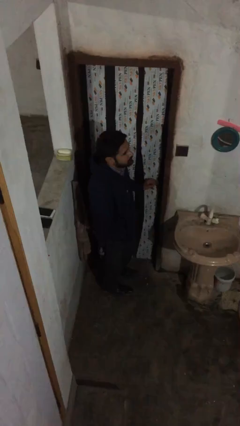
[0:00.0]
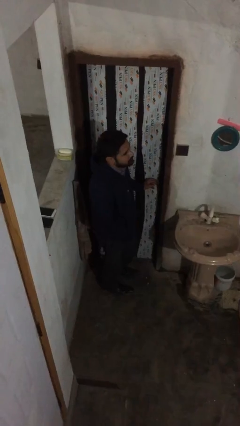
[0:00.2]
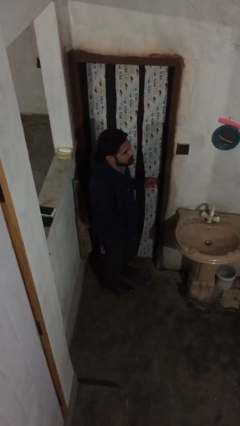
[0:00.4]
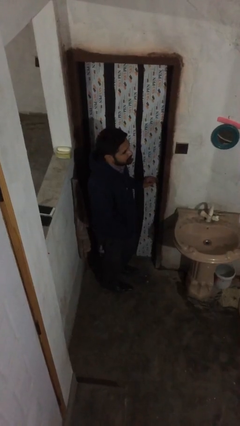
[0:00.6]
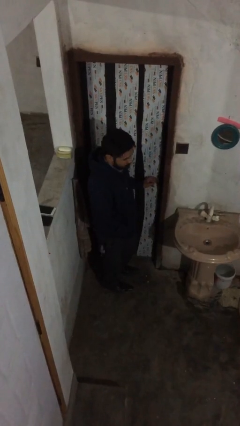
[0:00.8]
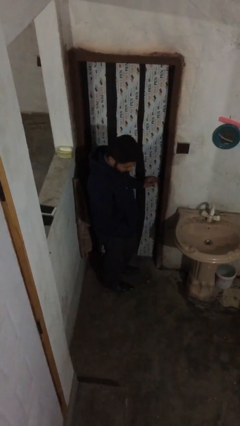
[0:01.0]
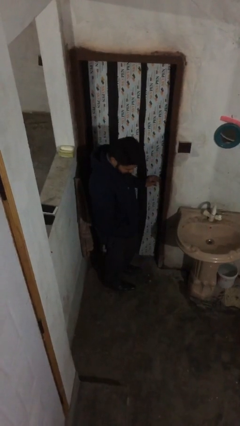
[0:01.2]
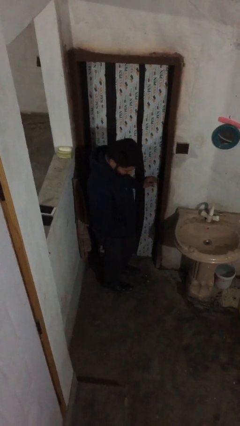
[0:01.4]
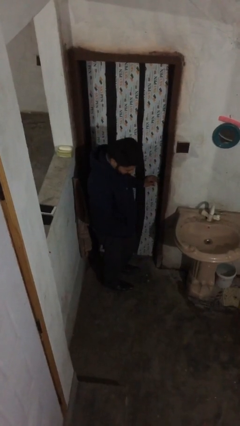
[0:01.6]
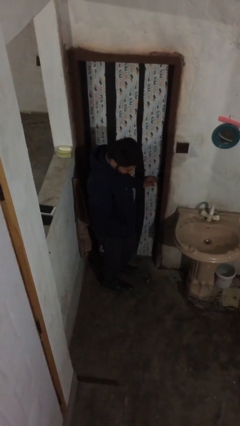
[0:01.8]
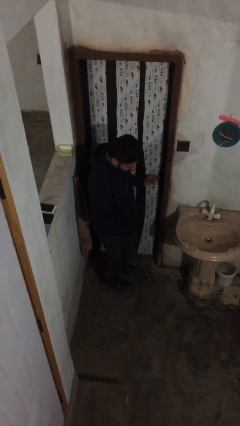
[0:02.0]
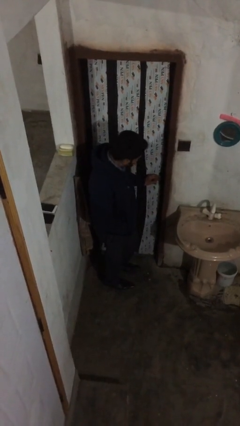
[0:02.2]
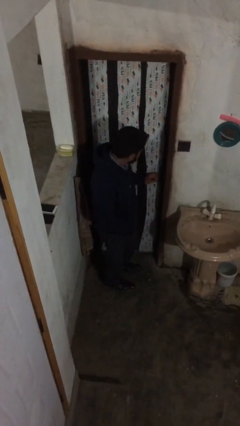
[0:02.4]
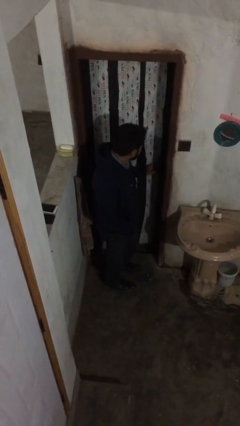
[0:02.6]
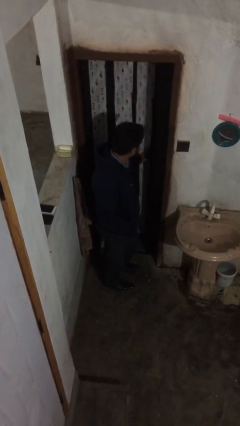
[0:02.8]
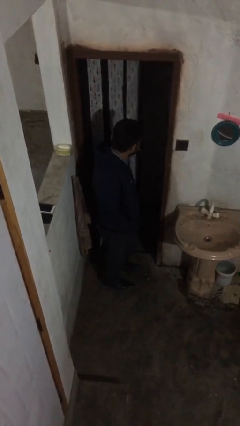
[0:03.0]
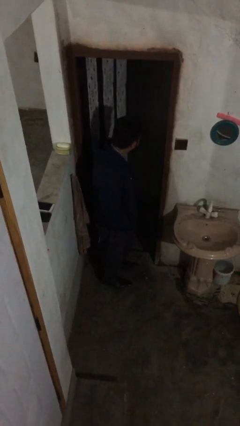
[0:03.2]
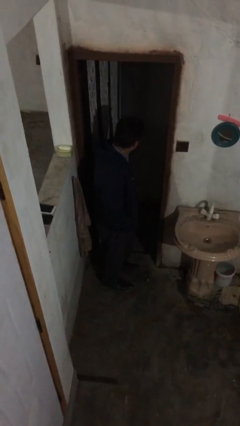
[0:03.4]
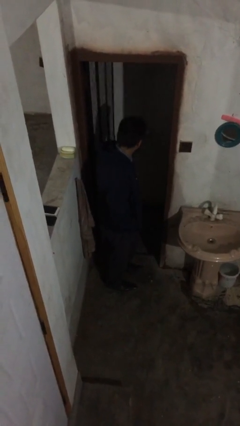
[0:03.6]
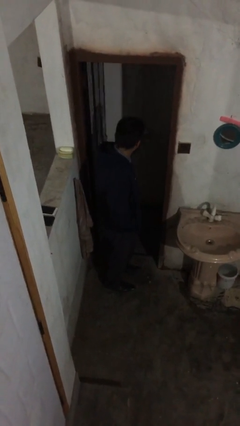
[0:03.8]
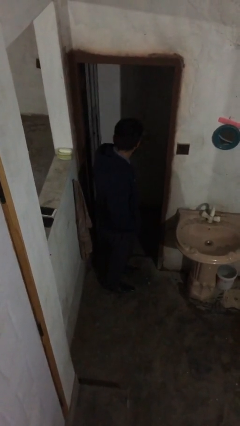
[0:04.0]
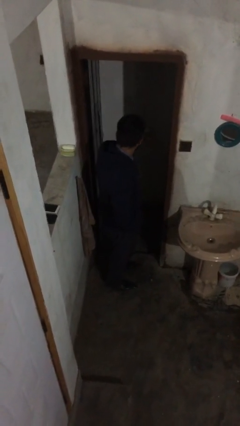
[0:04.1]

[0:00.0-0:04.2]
person opens facility door

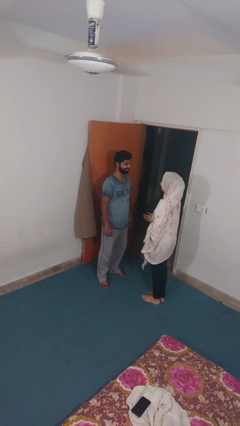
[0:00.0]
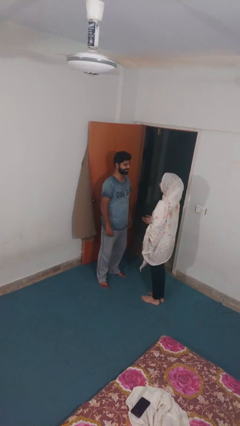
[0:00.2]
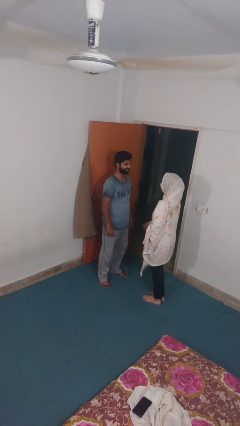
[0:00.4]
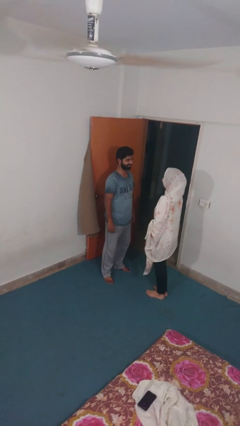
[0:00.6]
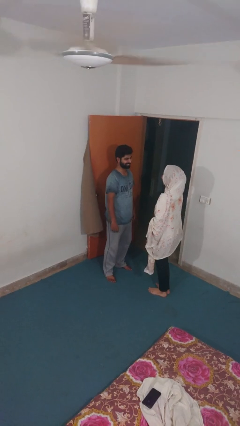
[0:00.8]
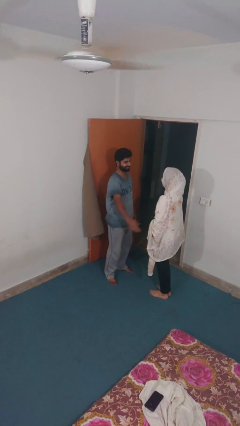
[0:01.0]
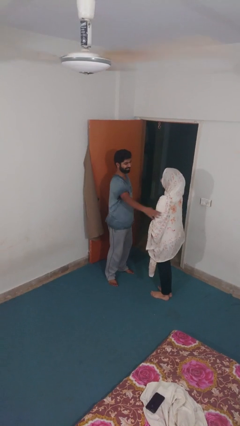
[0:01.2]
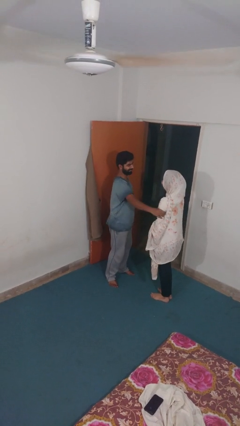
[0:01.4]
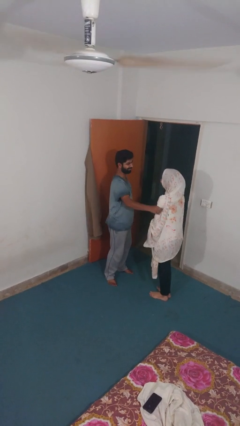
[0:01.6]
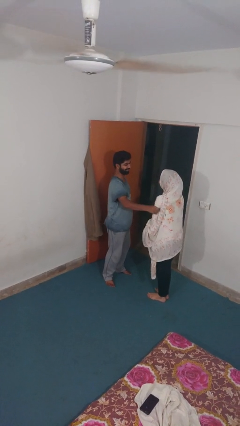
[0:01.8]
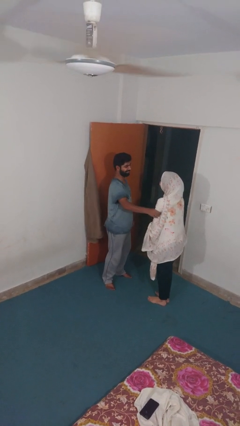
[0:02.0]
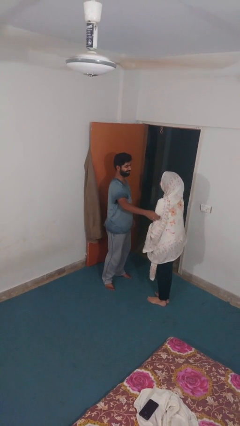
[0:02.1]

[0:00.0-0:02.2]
person grabs person by bicep

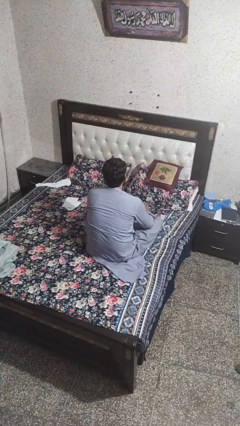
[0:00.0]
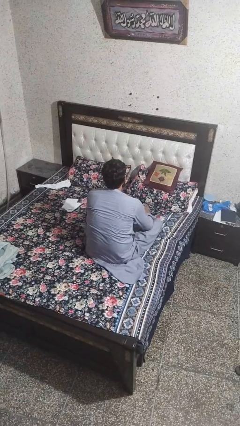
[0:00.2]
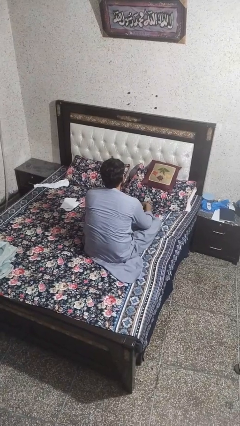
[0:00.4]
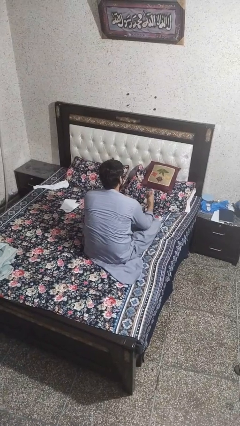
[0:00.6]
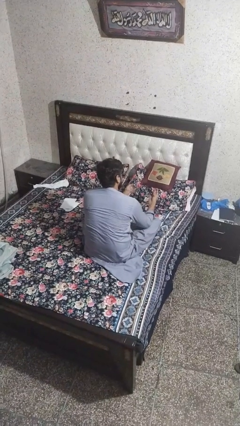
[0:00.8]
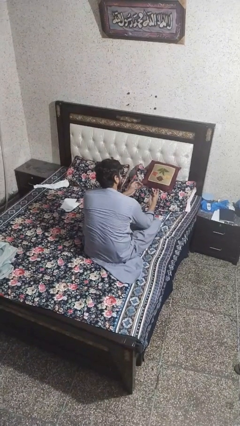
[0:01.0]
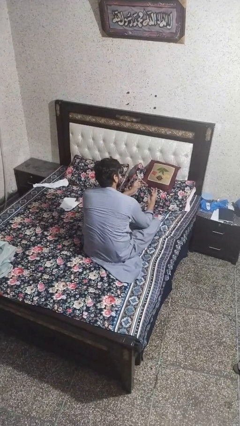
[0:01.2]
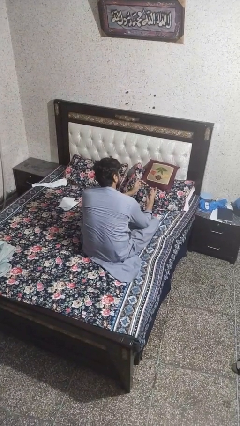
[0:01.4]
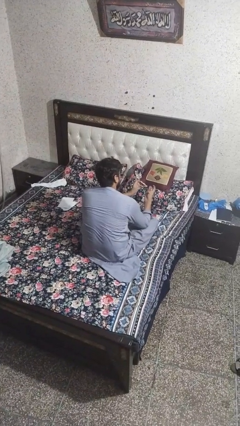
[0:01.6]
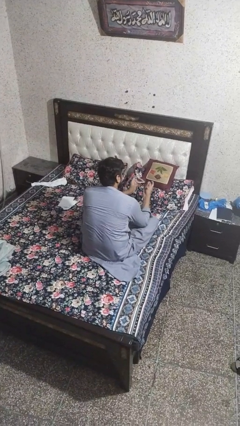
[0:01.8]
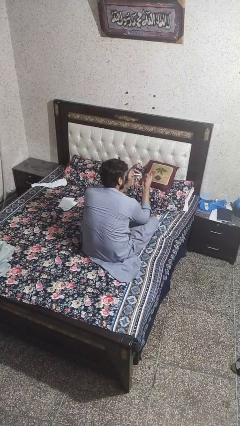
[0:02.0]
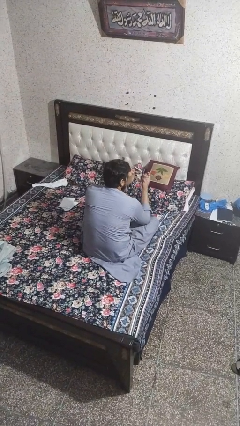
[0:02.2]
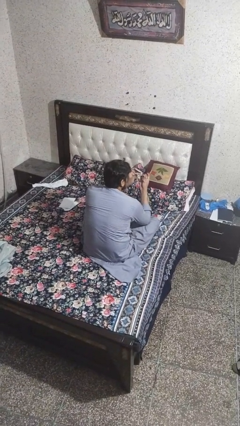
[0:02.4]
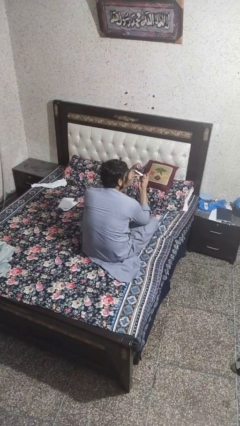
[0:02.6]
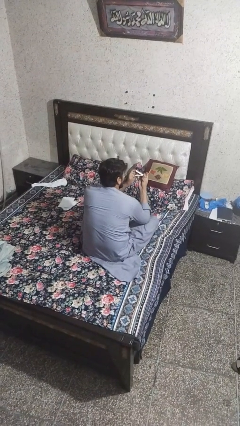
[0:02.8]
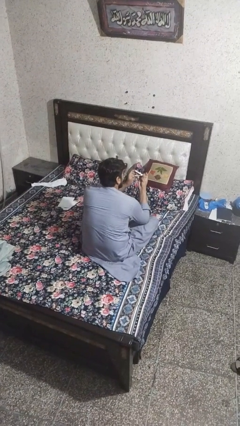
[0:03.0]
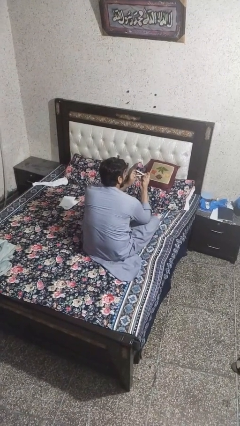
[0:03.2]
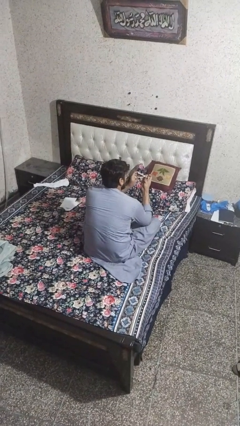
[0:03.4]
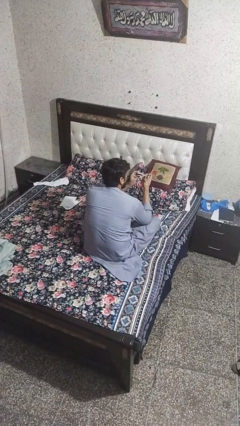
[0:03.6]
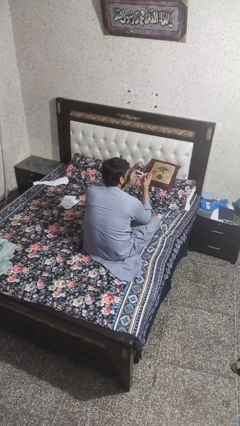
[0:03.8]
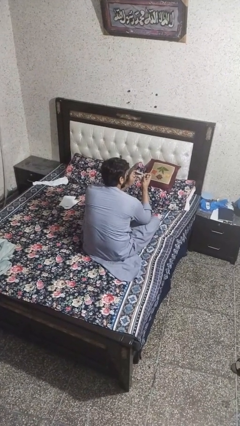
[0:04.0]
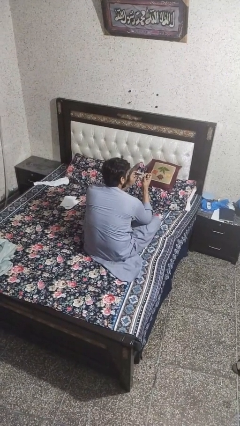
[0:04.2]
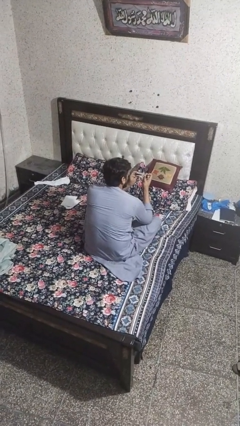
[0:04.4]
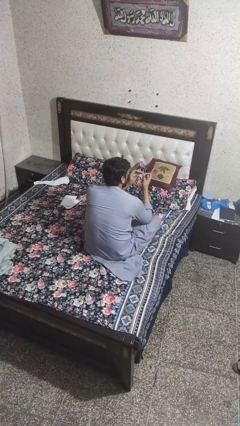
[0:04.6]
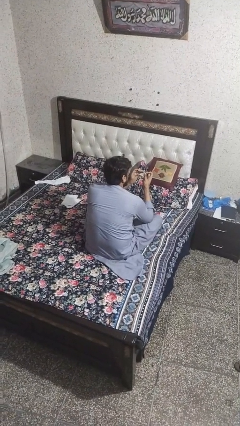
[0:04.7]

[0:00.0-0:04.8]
person clips fingernails

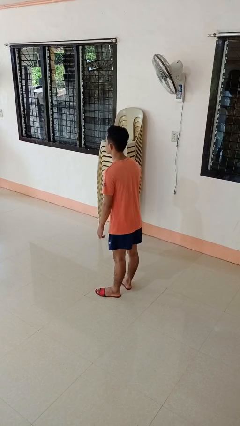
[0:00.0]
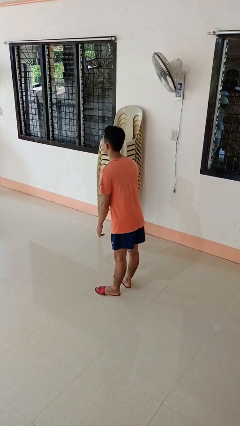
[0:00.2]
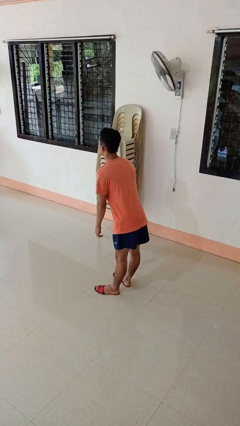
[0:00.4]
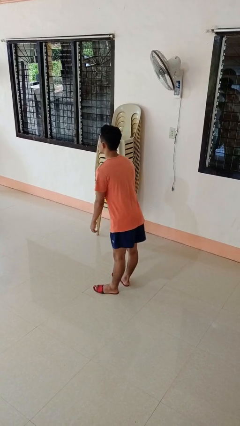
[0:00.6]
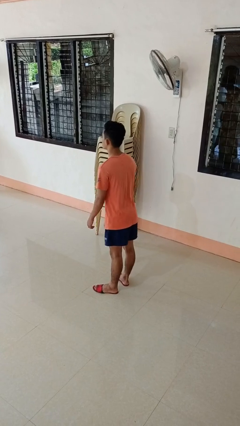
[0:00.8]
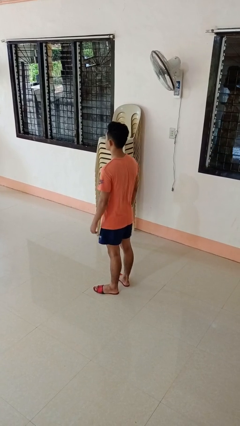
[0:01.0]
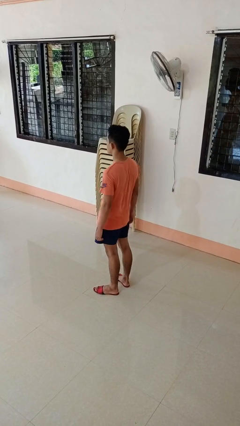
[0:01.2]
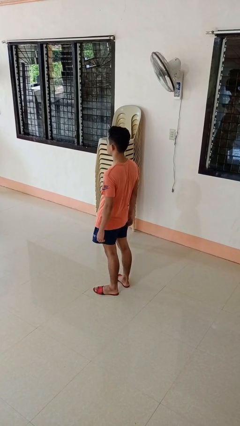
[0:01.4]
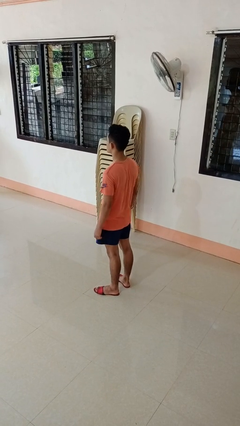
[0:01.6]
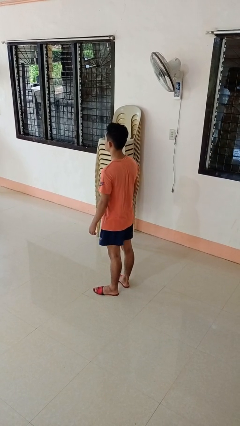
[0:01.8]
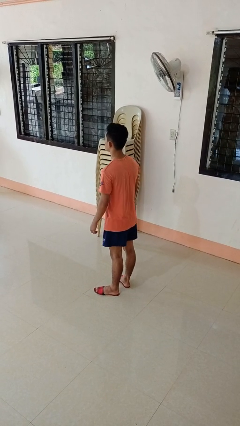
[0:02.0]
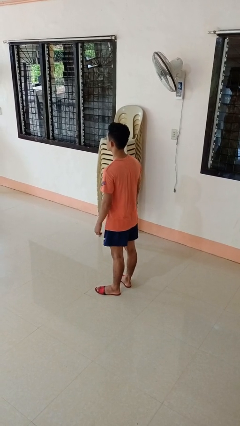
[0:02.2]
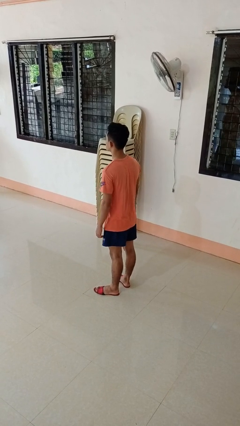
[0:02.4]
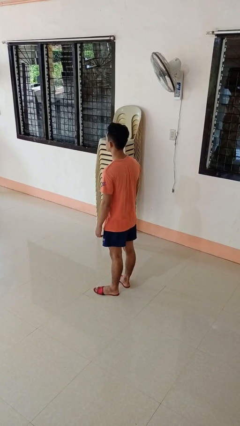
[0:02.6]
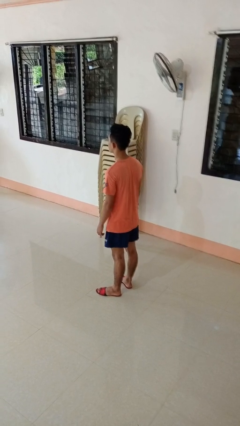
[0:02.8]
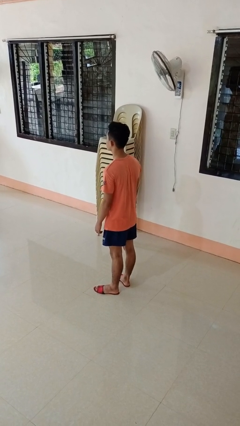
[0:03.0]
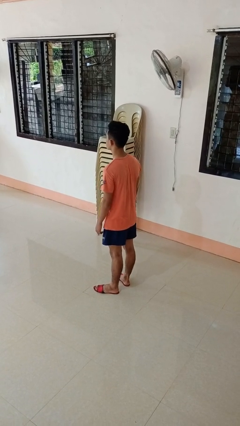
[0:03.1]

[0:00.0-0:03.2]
person wiggles hips

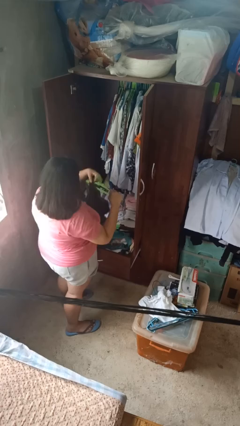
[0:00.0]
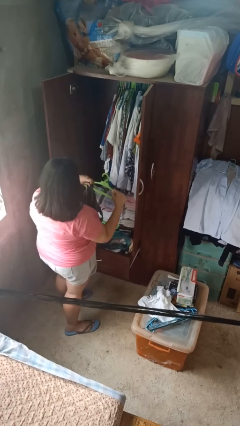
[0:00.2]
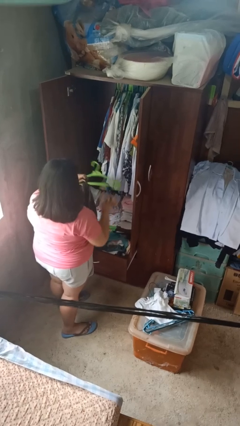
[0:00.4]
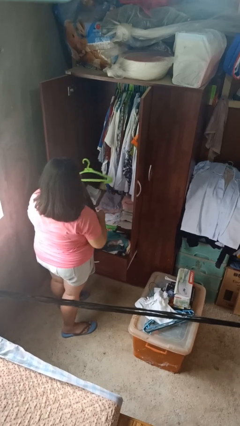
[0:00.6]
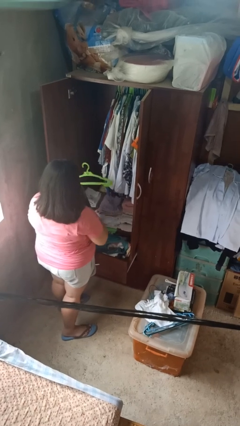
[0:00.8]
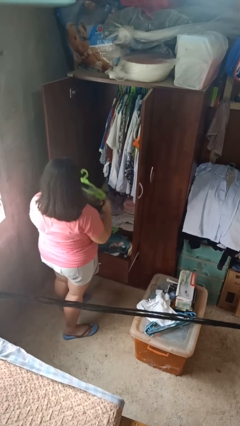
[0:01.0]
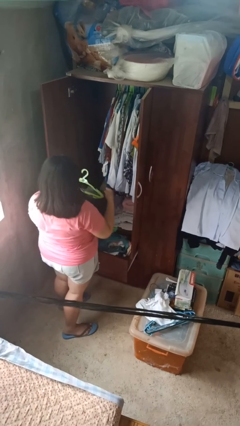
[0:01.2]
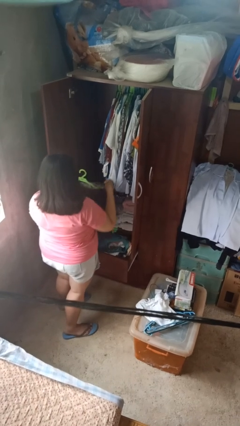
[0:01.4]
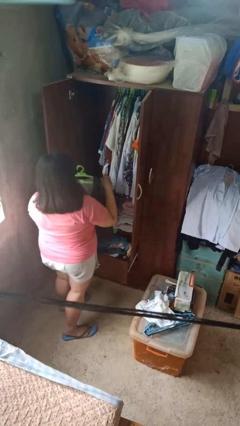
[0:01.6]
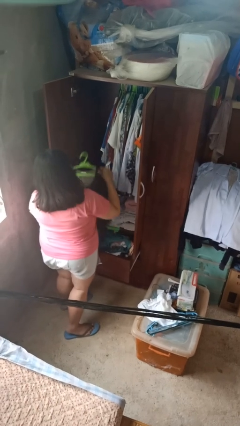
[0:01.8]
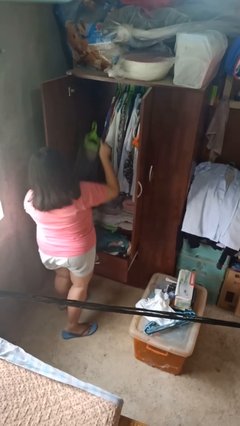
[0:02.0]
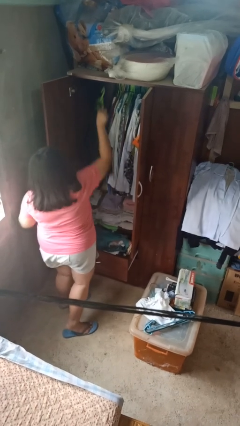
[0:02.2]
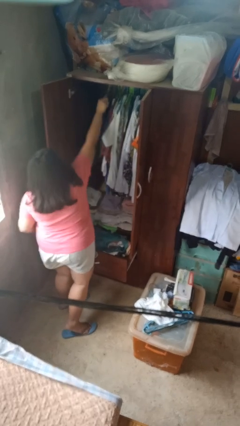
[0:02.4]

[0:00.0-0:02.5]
person puts clothes into closet

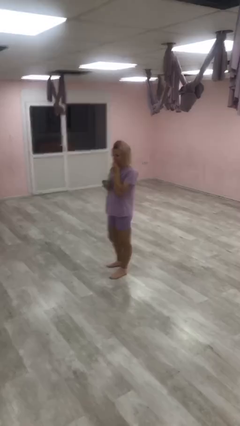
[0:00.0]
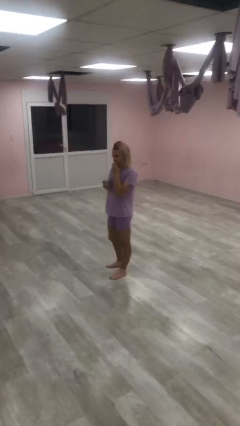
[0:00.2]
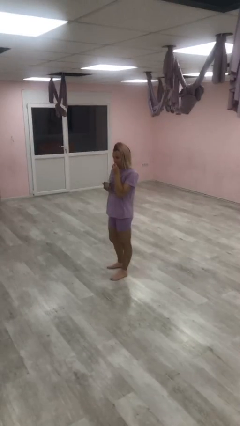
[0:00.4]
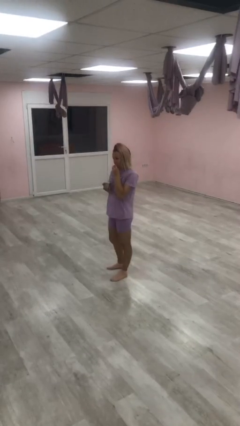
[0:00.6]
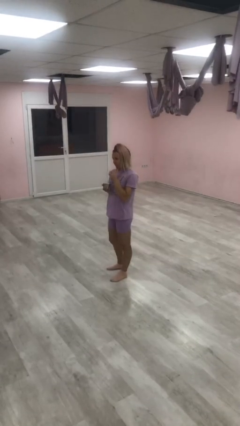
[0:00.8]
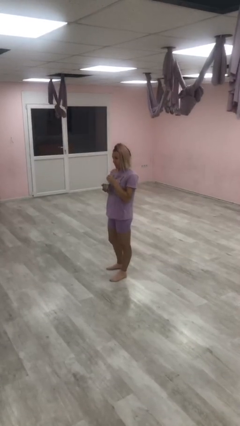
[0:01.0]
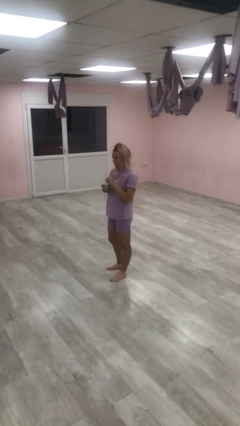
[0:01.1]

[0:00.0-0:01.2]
person eats snack from bag
